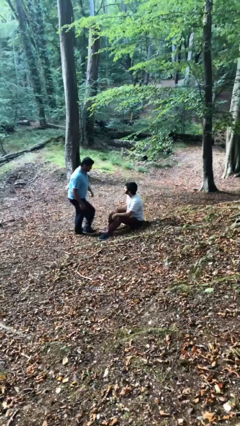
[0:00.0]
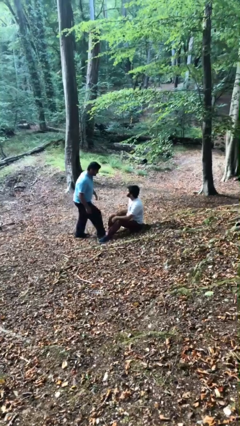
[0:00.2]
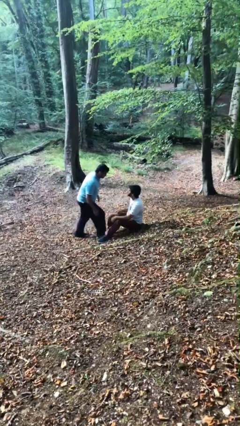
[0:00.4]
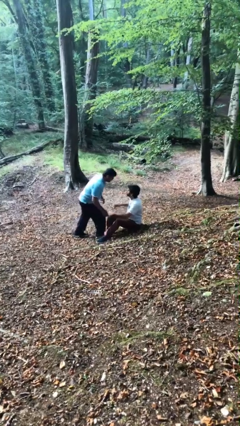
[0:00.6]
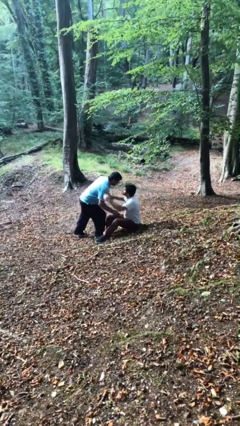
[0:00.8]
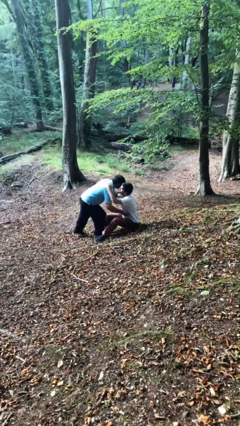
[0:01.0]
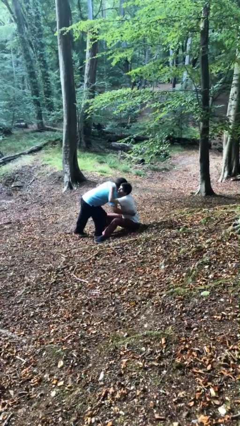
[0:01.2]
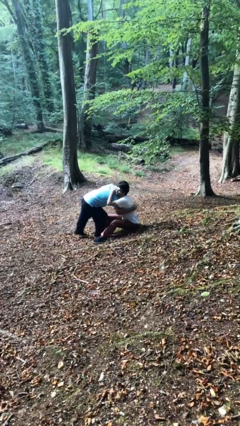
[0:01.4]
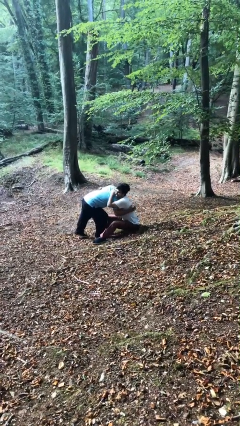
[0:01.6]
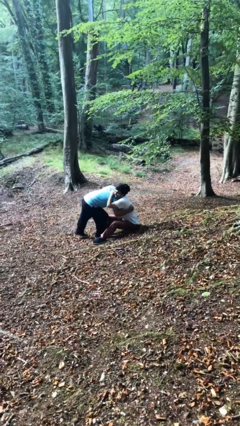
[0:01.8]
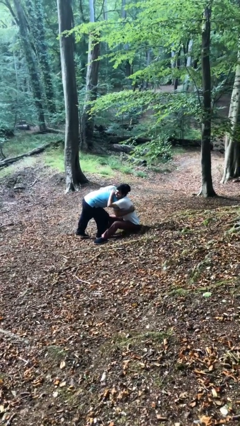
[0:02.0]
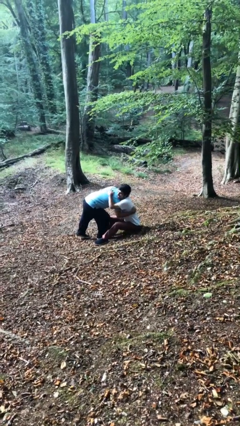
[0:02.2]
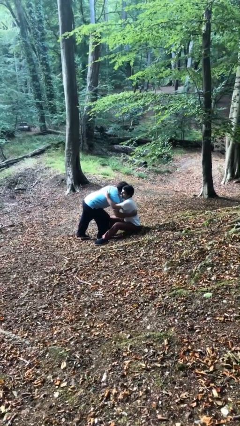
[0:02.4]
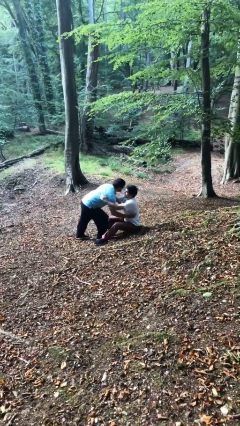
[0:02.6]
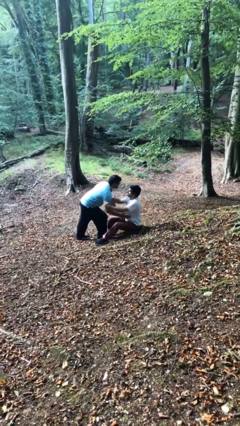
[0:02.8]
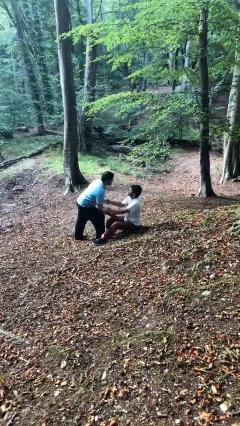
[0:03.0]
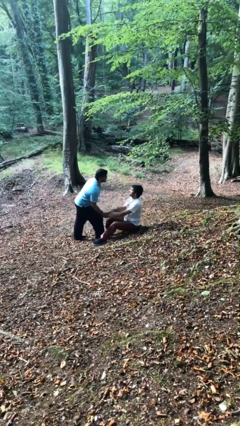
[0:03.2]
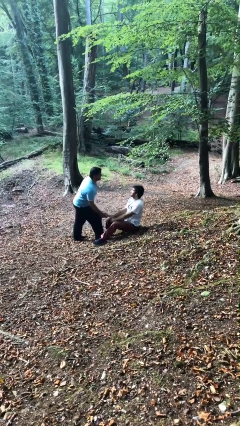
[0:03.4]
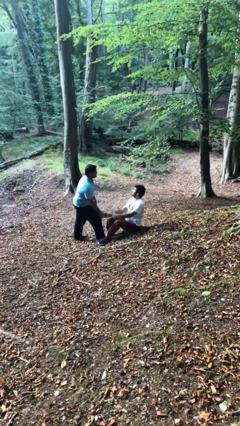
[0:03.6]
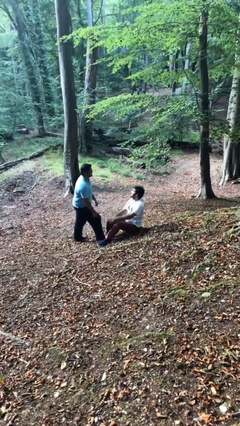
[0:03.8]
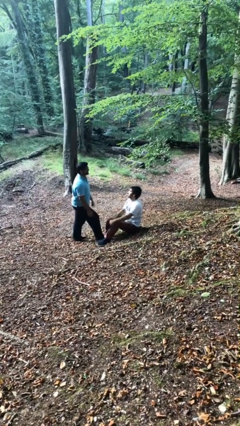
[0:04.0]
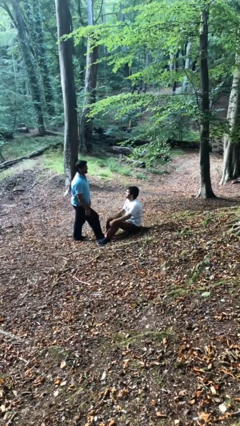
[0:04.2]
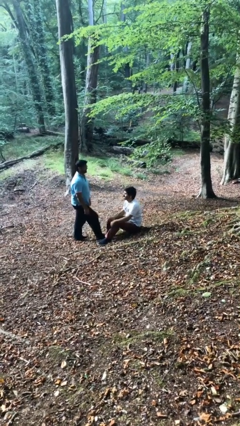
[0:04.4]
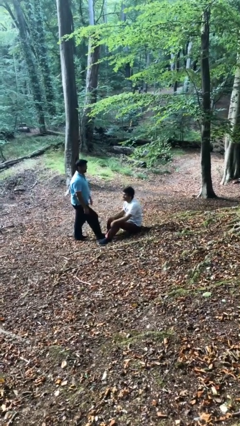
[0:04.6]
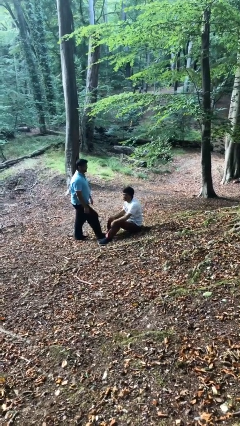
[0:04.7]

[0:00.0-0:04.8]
person embraces person

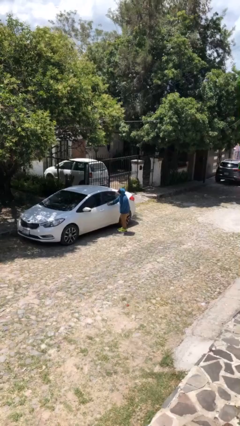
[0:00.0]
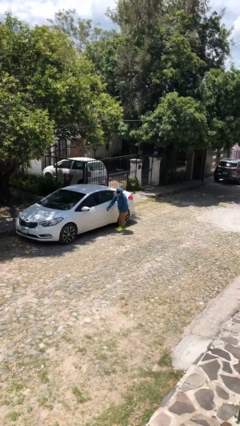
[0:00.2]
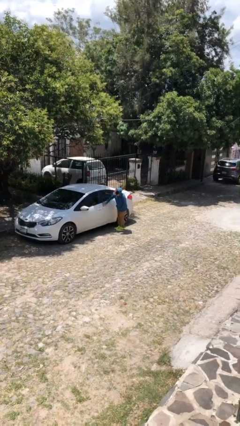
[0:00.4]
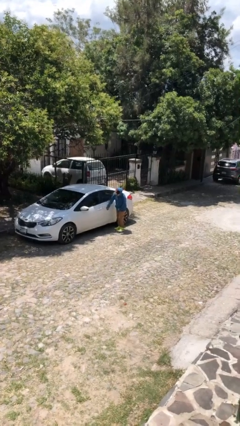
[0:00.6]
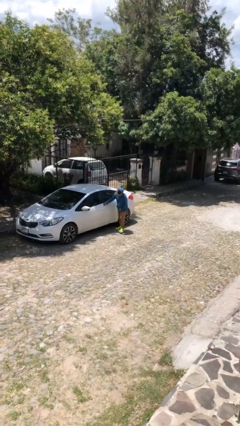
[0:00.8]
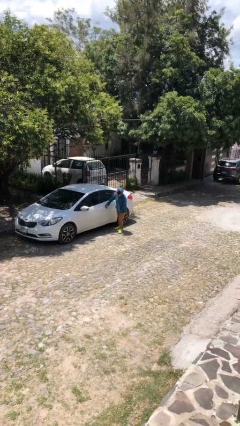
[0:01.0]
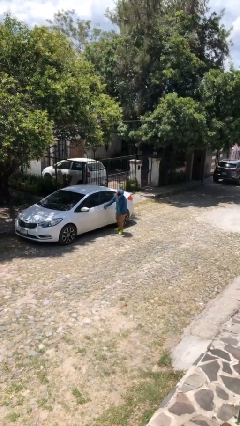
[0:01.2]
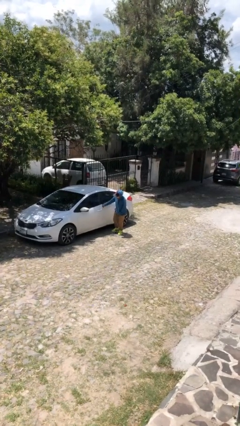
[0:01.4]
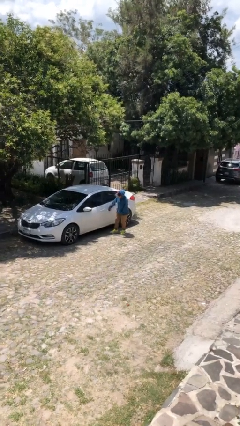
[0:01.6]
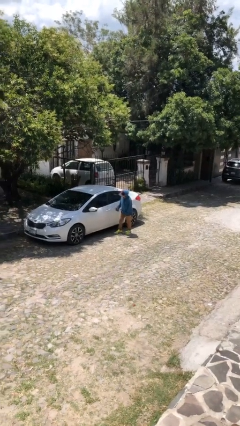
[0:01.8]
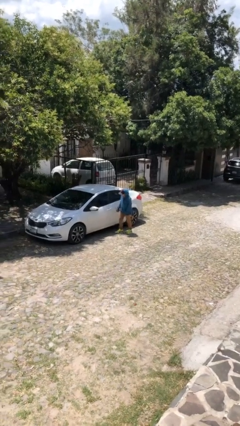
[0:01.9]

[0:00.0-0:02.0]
person polishes car with rag

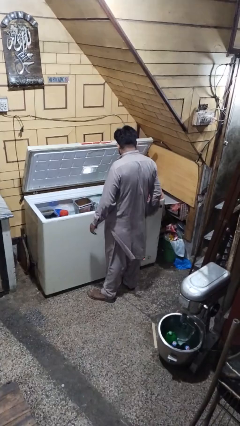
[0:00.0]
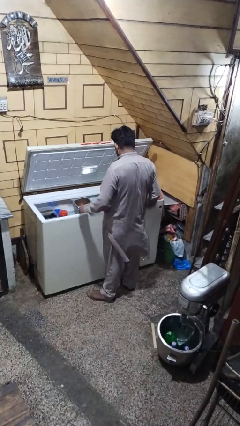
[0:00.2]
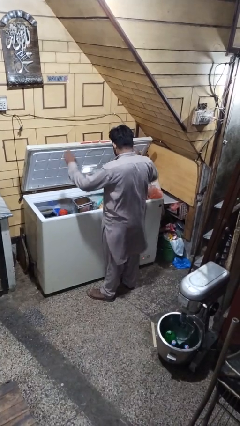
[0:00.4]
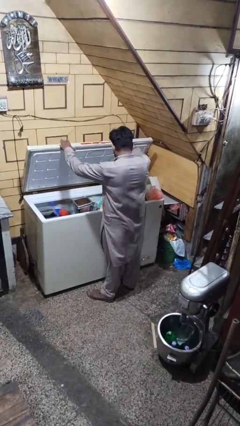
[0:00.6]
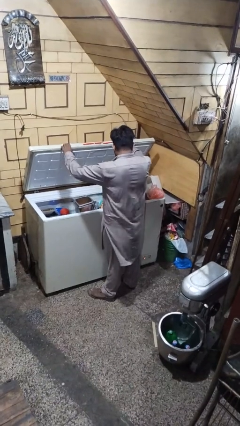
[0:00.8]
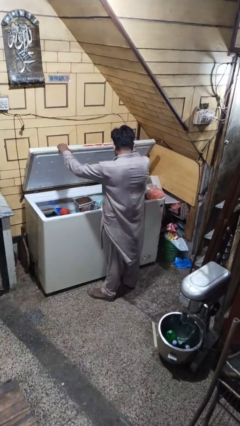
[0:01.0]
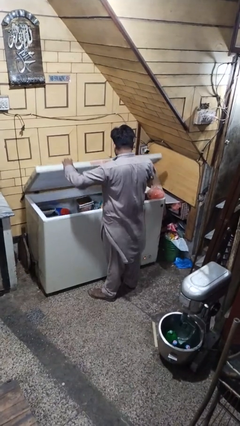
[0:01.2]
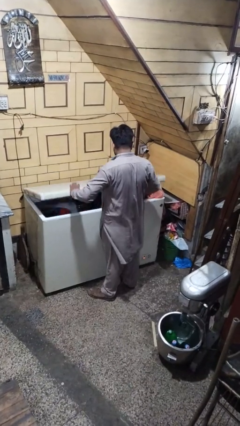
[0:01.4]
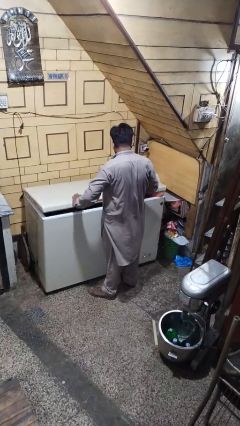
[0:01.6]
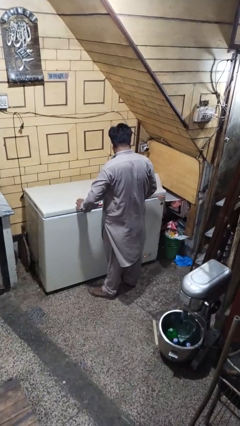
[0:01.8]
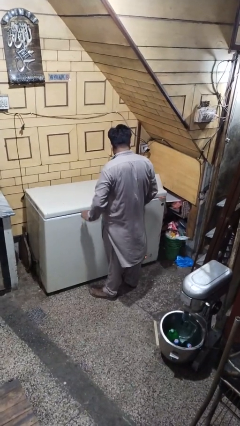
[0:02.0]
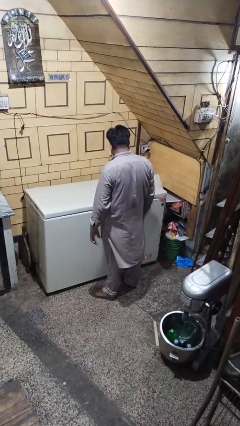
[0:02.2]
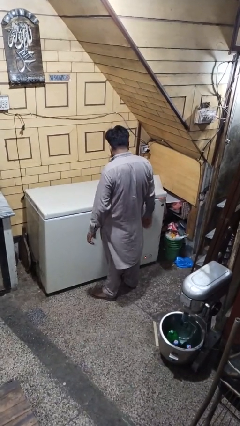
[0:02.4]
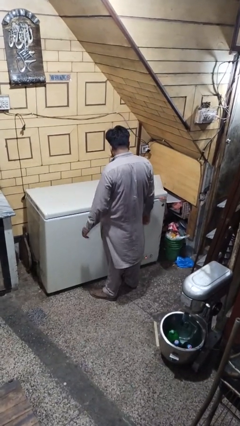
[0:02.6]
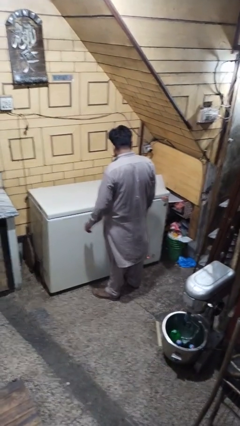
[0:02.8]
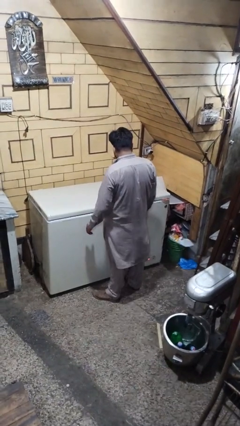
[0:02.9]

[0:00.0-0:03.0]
person closes refrigerator

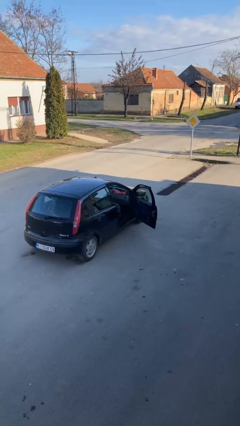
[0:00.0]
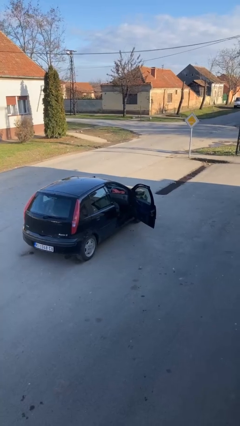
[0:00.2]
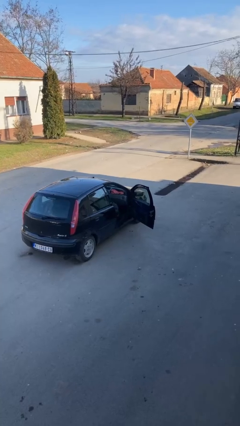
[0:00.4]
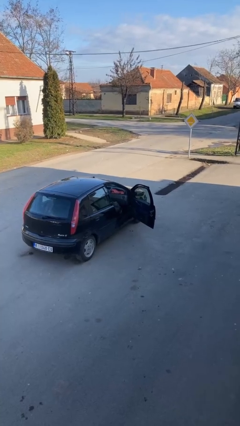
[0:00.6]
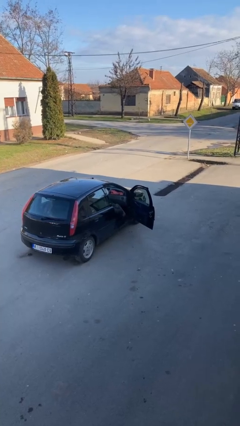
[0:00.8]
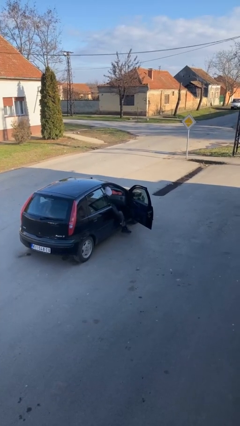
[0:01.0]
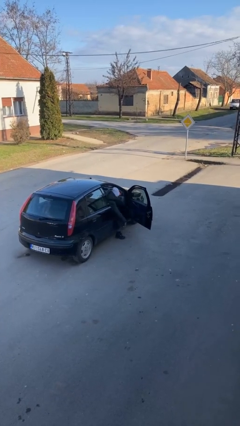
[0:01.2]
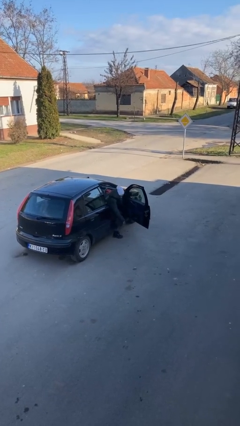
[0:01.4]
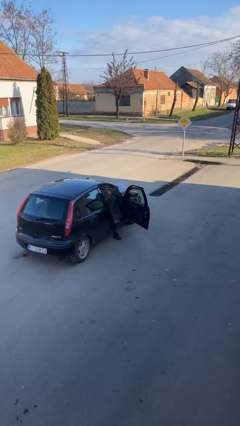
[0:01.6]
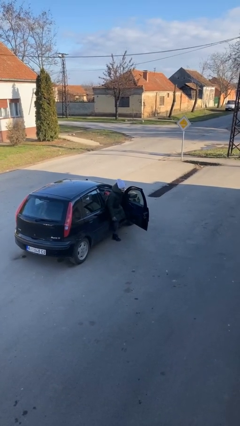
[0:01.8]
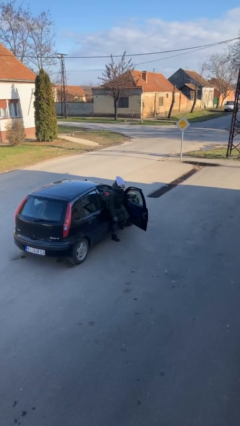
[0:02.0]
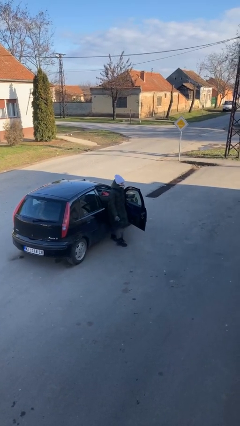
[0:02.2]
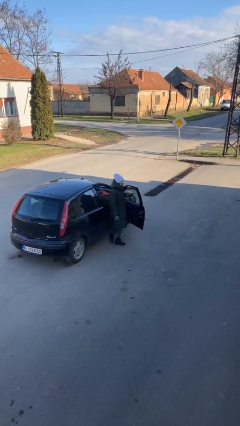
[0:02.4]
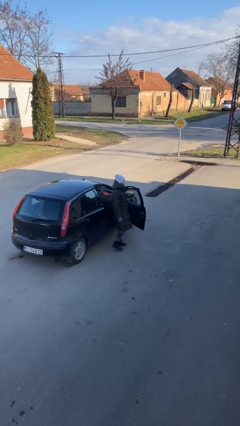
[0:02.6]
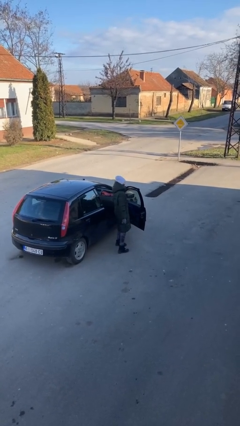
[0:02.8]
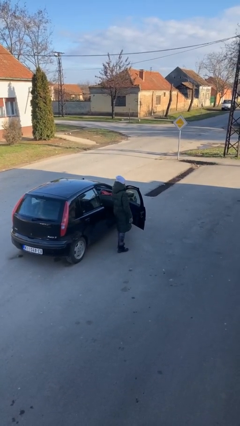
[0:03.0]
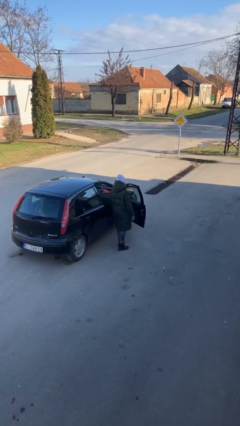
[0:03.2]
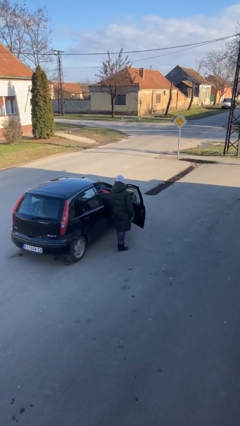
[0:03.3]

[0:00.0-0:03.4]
person exits car

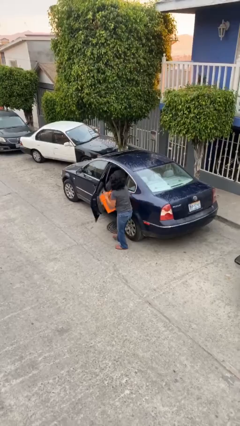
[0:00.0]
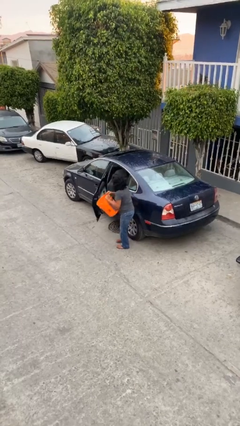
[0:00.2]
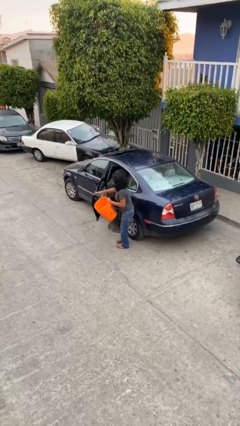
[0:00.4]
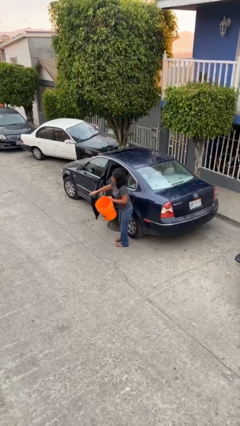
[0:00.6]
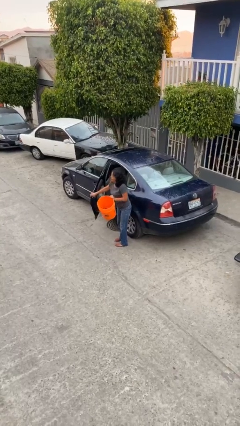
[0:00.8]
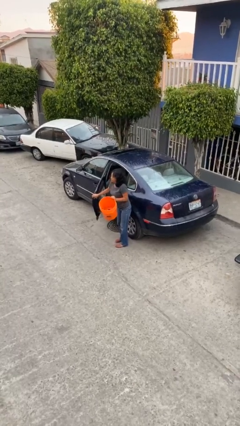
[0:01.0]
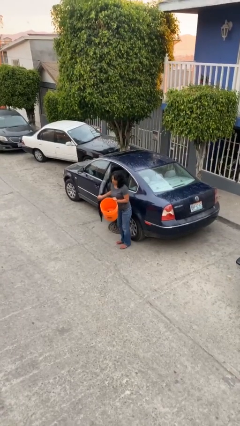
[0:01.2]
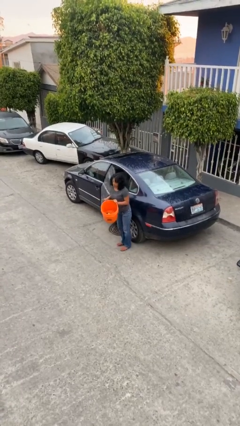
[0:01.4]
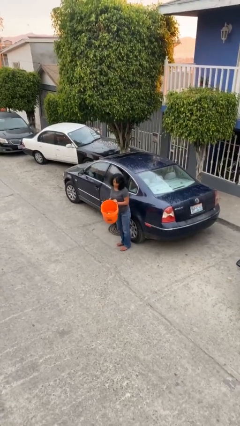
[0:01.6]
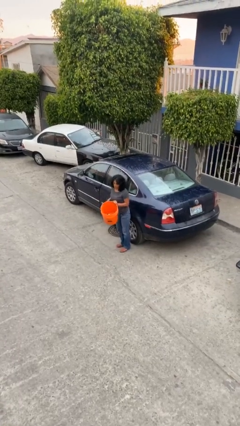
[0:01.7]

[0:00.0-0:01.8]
person closes car door

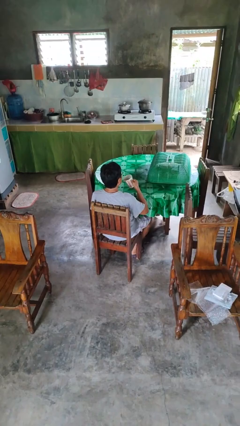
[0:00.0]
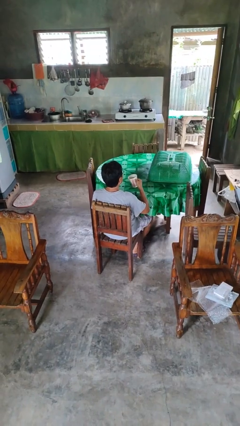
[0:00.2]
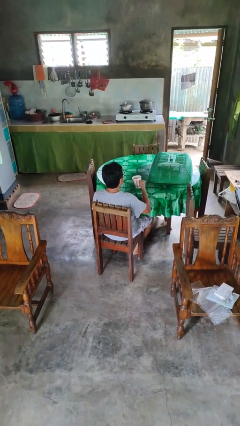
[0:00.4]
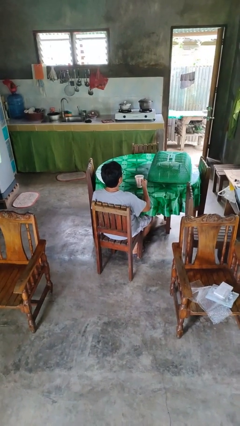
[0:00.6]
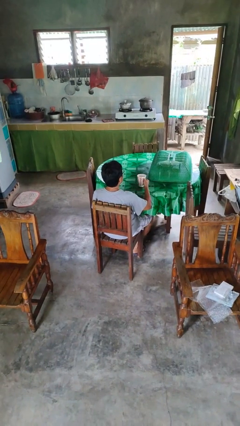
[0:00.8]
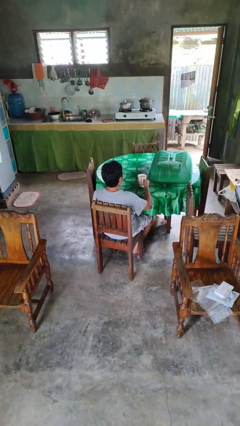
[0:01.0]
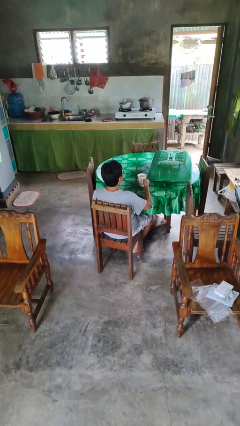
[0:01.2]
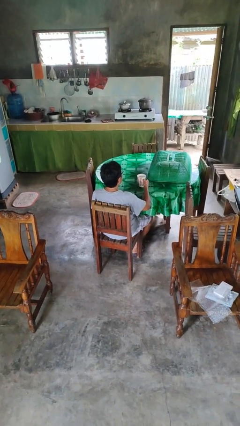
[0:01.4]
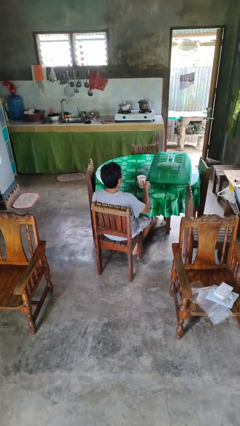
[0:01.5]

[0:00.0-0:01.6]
person puts down object on table

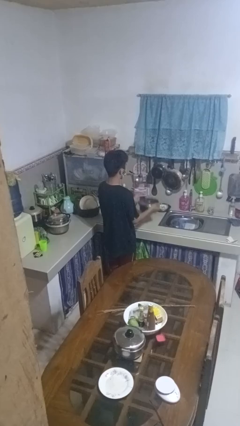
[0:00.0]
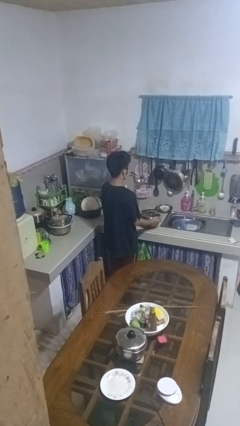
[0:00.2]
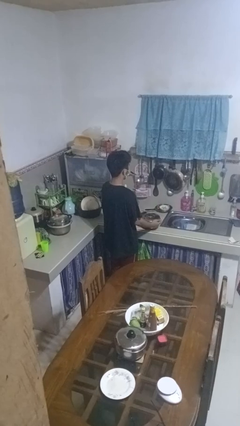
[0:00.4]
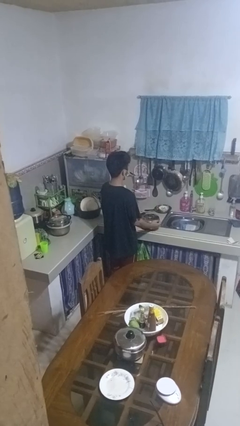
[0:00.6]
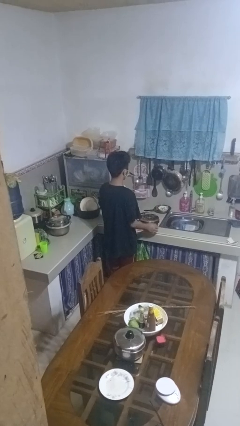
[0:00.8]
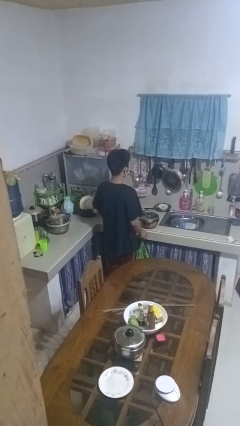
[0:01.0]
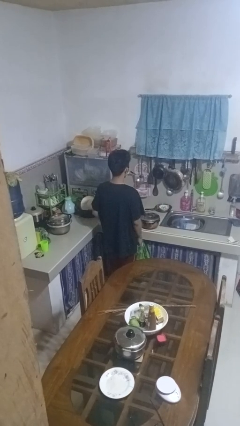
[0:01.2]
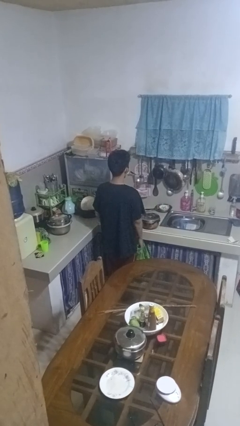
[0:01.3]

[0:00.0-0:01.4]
person puts down object on countertop
